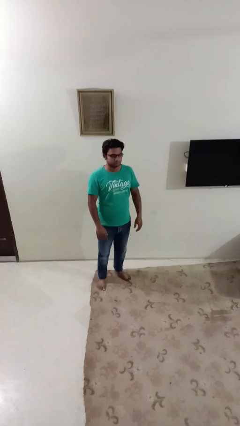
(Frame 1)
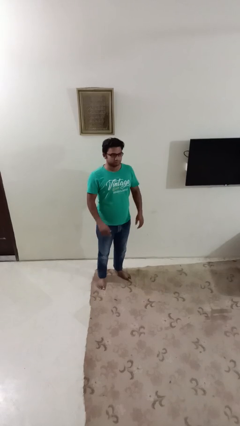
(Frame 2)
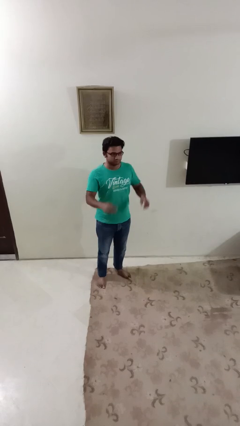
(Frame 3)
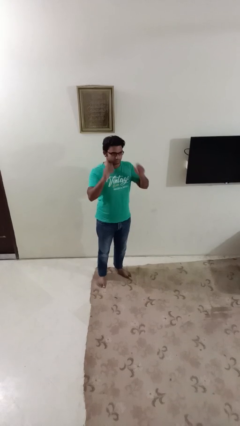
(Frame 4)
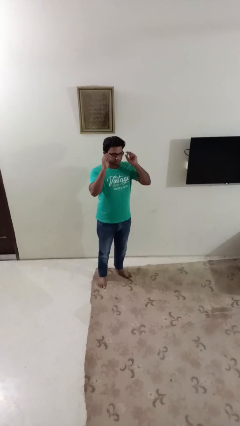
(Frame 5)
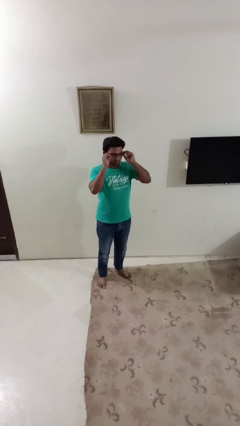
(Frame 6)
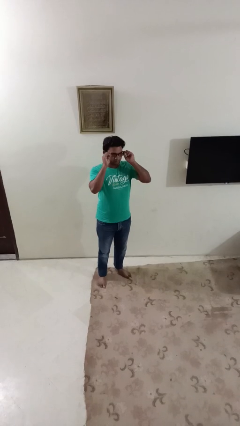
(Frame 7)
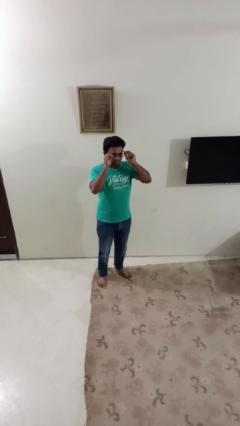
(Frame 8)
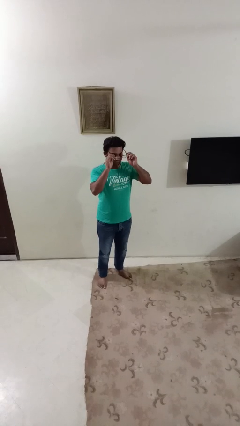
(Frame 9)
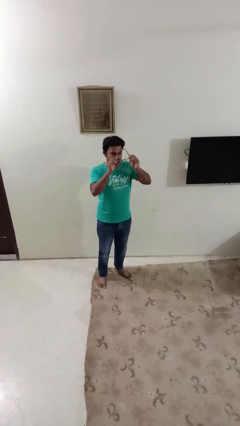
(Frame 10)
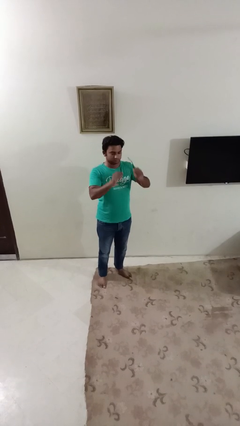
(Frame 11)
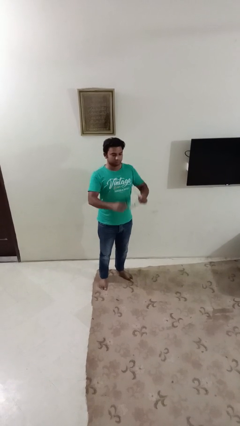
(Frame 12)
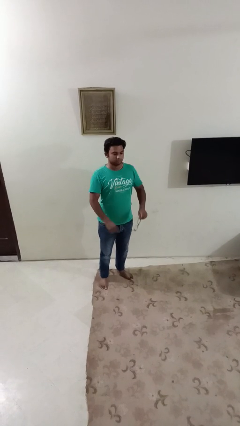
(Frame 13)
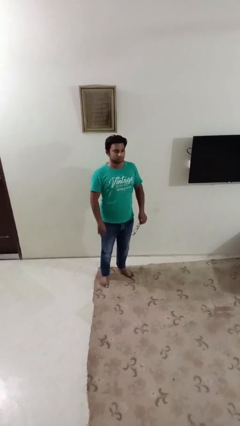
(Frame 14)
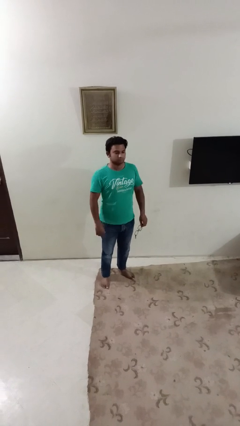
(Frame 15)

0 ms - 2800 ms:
person takes off glasses

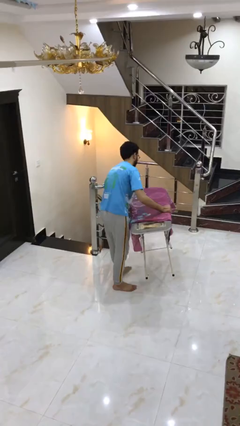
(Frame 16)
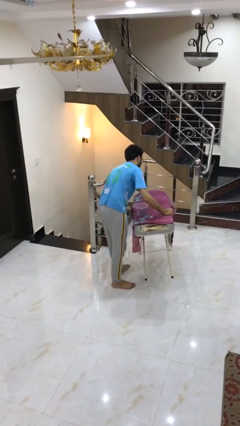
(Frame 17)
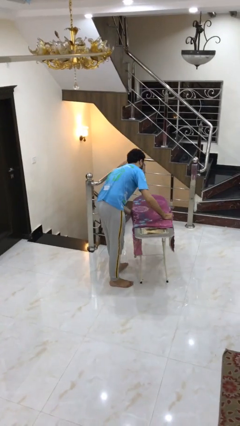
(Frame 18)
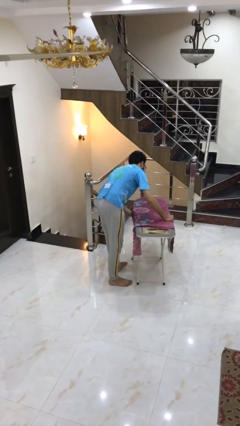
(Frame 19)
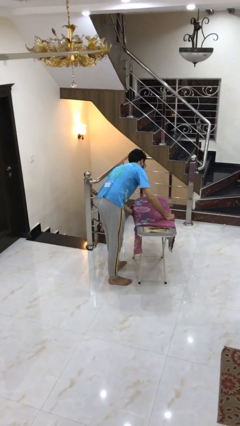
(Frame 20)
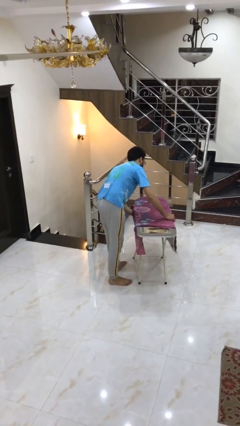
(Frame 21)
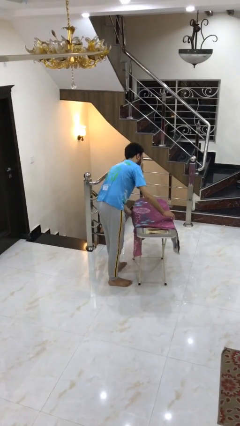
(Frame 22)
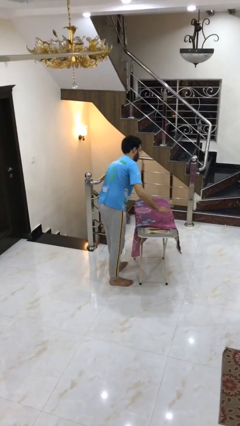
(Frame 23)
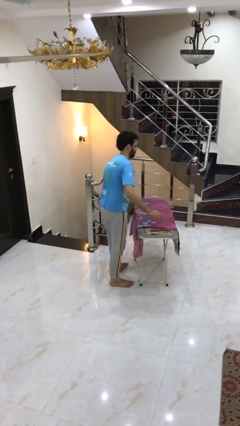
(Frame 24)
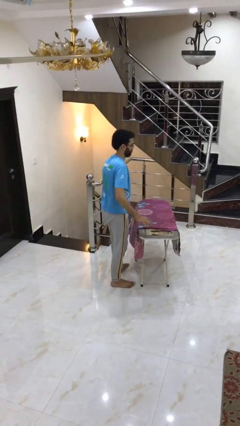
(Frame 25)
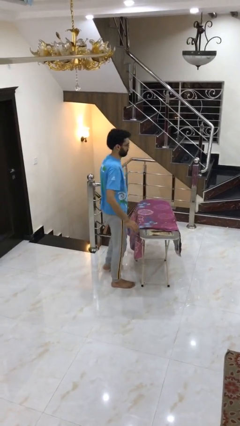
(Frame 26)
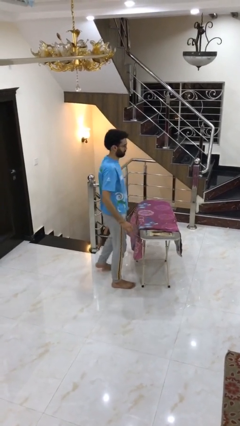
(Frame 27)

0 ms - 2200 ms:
person puts down object on floor

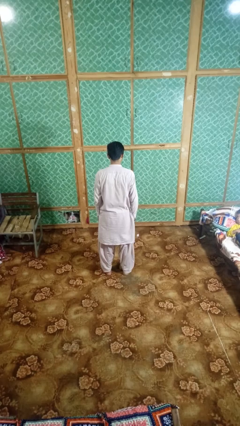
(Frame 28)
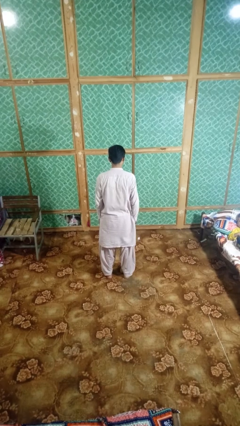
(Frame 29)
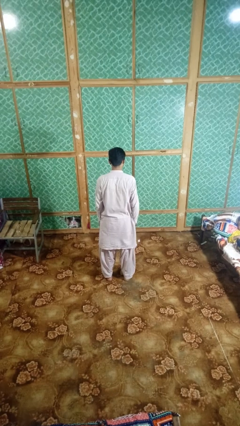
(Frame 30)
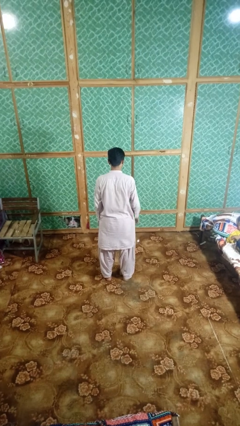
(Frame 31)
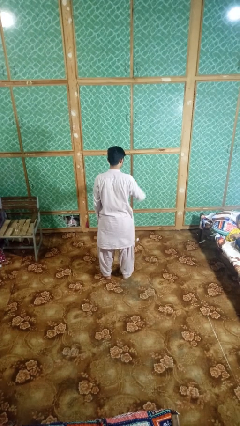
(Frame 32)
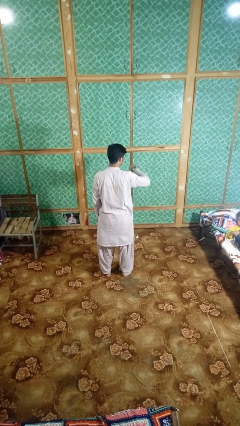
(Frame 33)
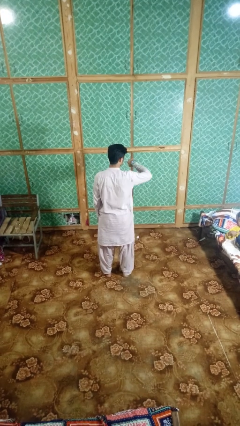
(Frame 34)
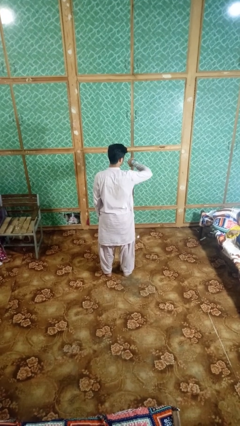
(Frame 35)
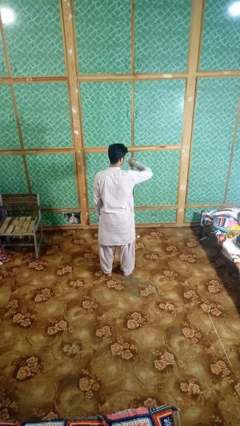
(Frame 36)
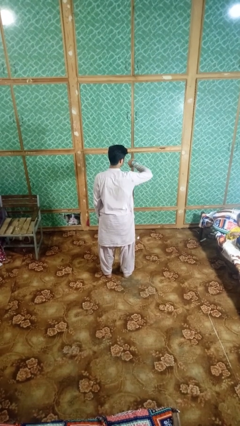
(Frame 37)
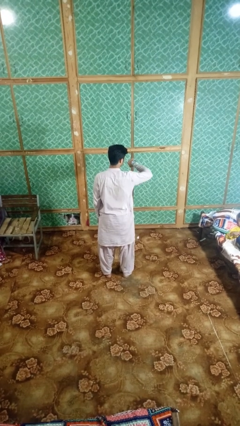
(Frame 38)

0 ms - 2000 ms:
person looks at wristwatch

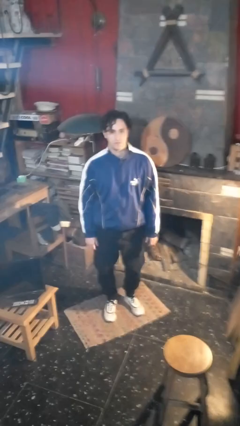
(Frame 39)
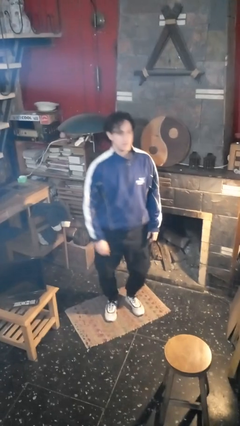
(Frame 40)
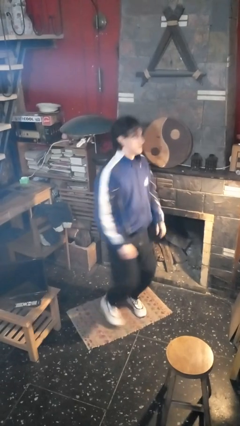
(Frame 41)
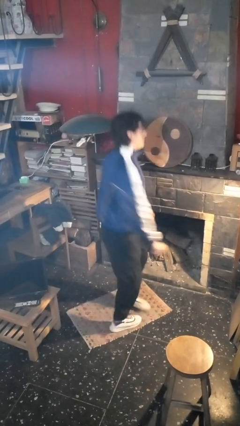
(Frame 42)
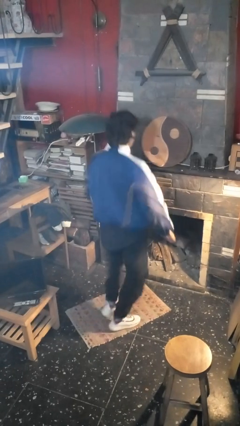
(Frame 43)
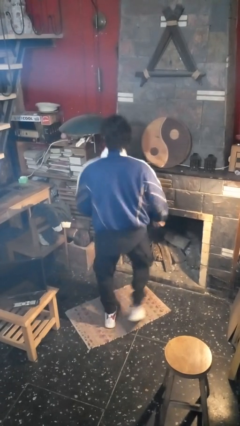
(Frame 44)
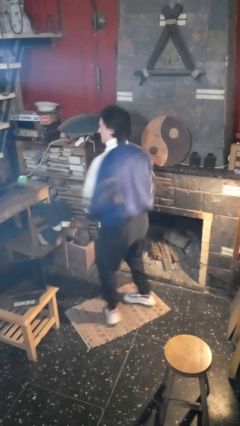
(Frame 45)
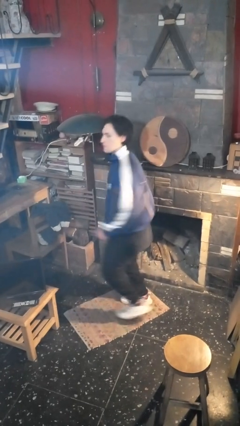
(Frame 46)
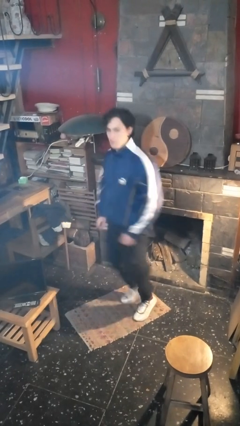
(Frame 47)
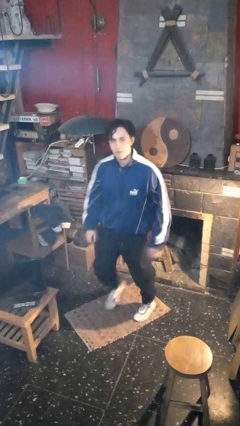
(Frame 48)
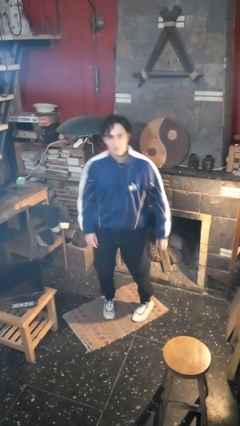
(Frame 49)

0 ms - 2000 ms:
person twirls

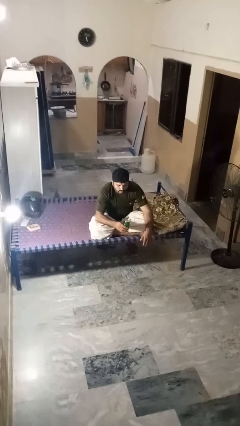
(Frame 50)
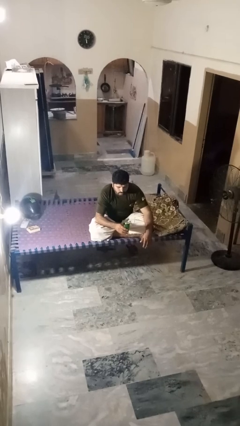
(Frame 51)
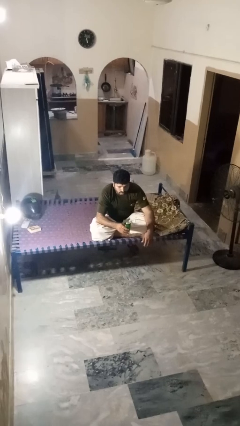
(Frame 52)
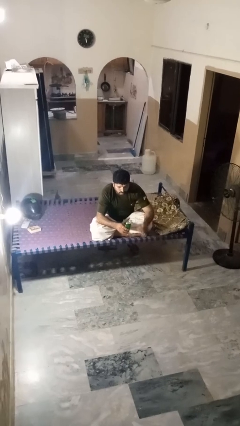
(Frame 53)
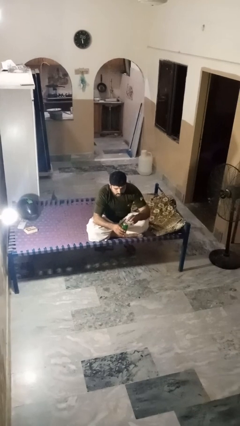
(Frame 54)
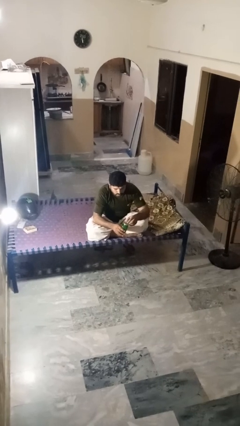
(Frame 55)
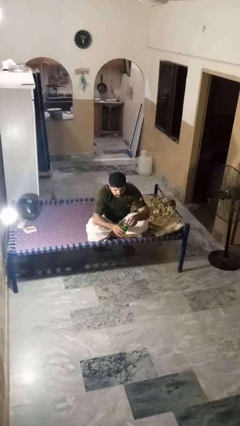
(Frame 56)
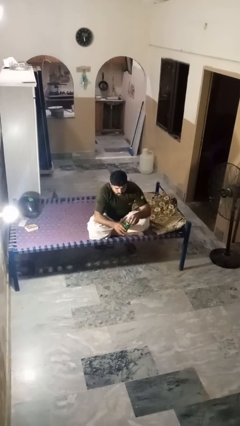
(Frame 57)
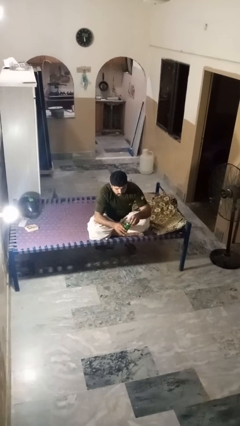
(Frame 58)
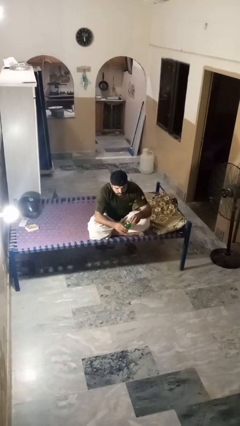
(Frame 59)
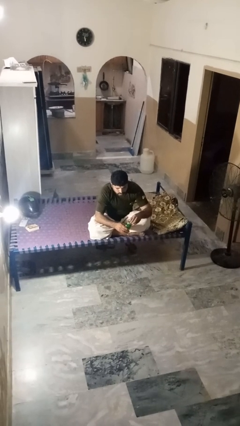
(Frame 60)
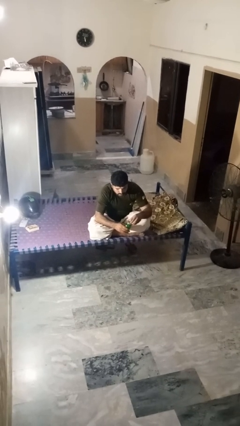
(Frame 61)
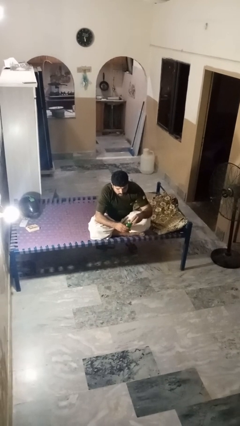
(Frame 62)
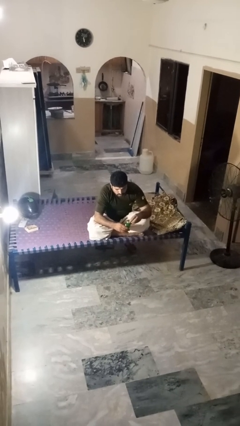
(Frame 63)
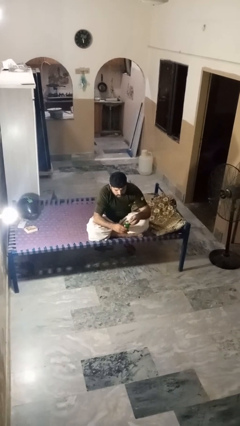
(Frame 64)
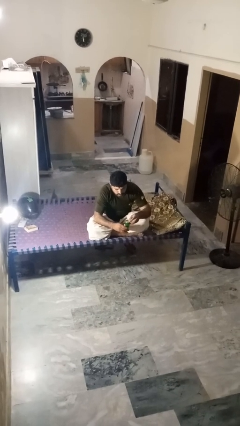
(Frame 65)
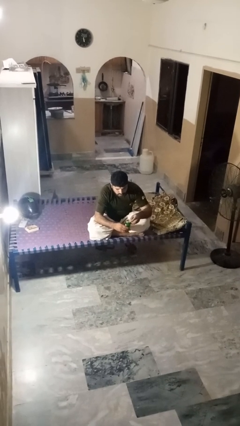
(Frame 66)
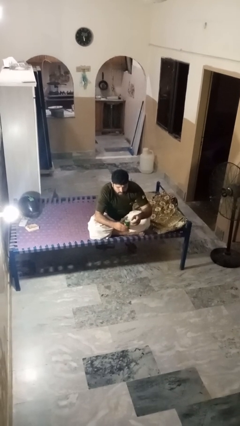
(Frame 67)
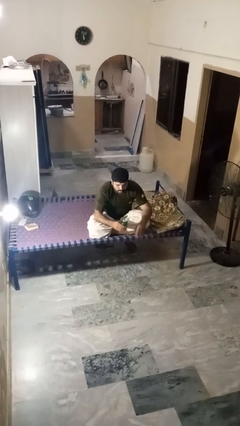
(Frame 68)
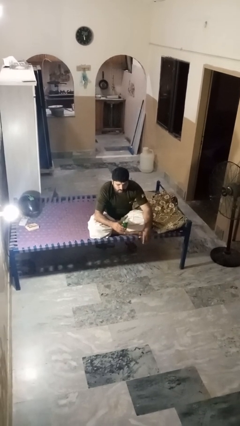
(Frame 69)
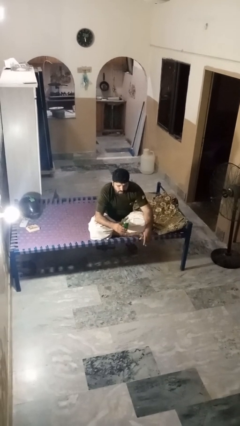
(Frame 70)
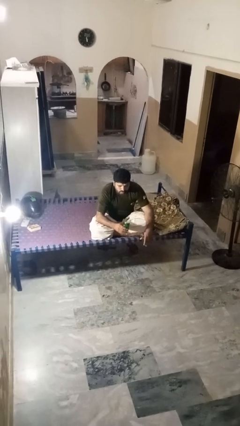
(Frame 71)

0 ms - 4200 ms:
person opens beverage can

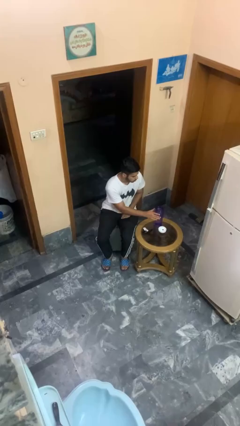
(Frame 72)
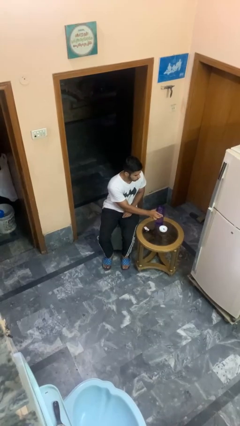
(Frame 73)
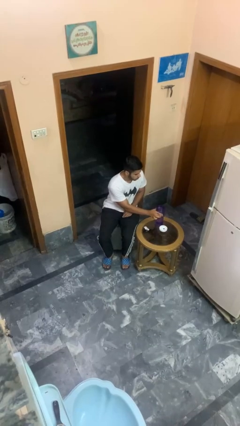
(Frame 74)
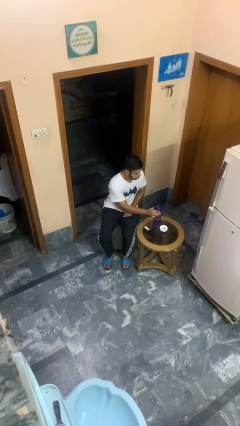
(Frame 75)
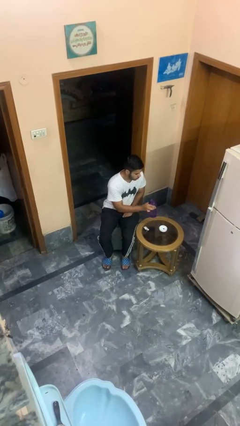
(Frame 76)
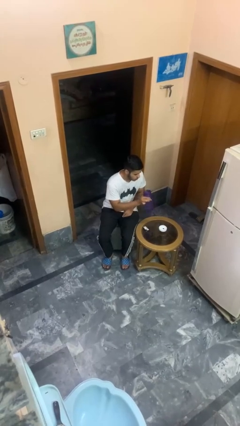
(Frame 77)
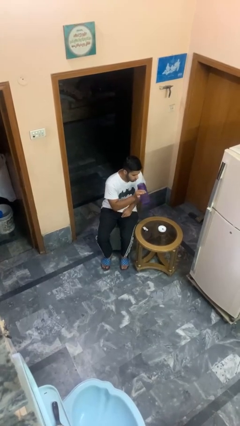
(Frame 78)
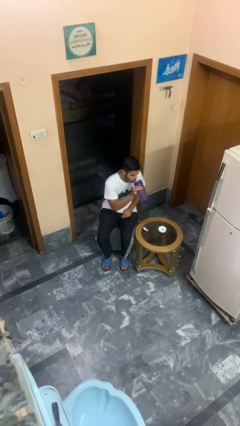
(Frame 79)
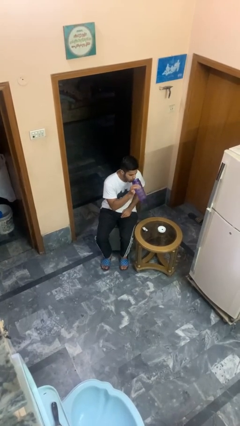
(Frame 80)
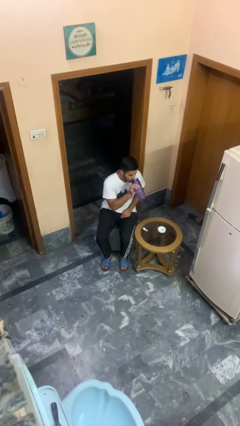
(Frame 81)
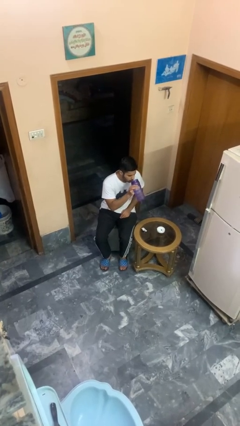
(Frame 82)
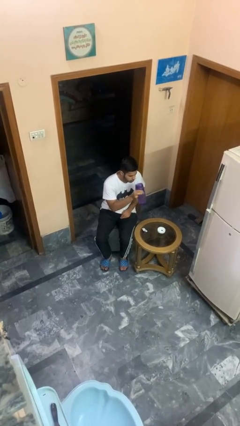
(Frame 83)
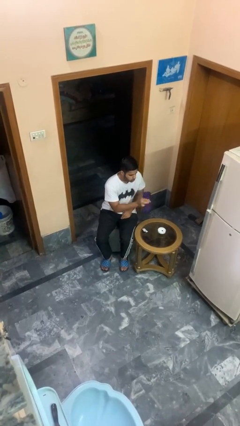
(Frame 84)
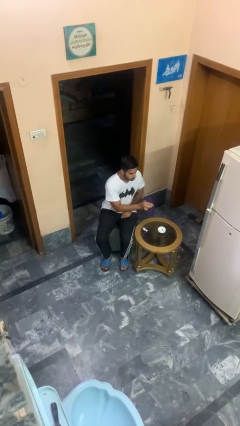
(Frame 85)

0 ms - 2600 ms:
person drinks from cup

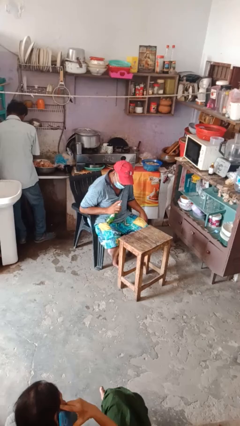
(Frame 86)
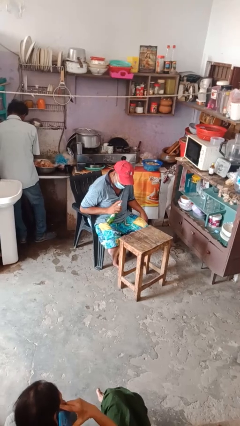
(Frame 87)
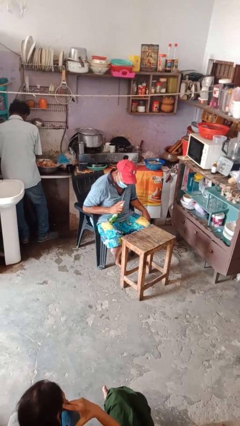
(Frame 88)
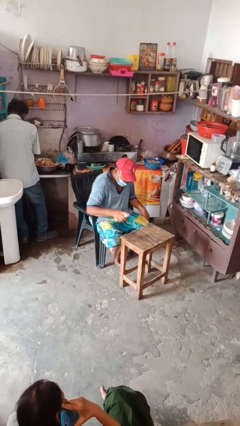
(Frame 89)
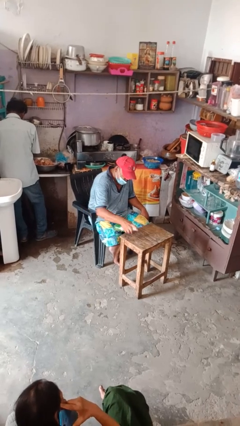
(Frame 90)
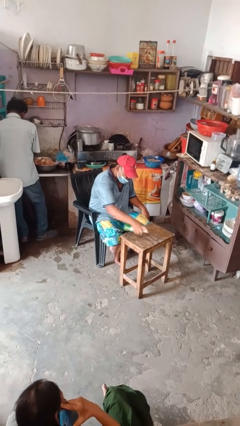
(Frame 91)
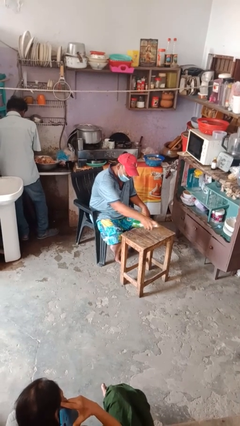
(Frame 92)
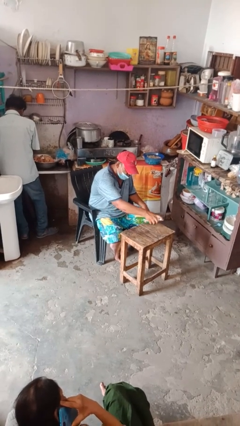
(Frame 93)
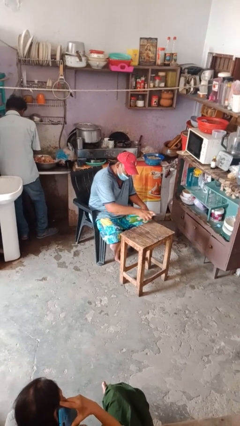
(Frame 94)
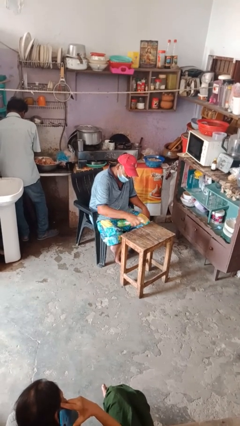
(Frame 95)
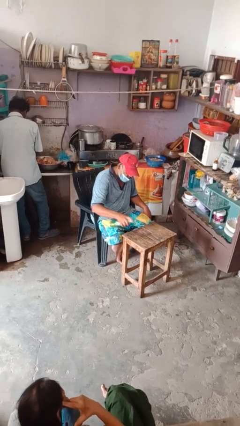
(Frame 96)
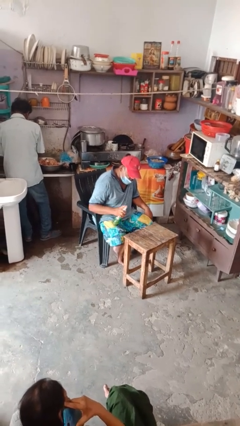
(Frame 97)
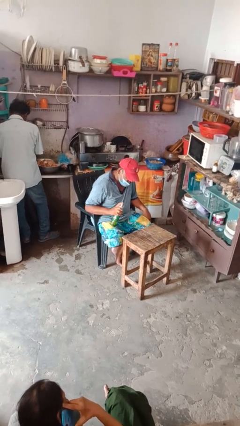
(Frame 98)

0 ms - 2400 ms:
person sprays from bottle
